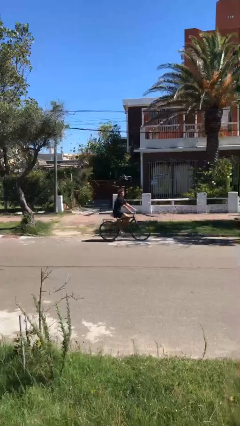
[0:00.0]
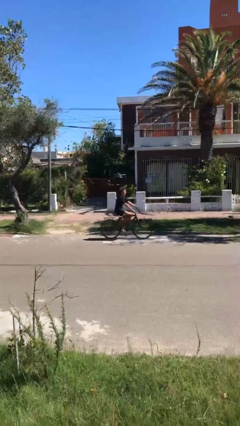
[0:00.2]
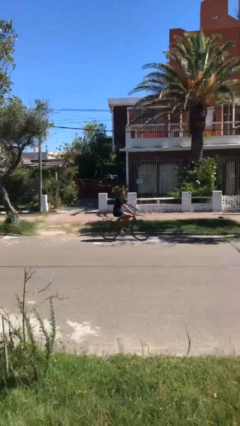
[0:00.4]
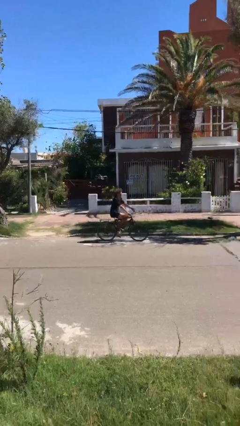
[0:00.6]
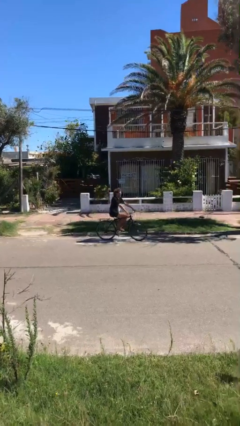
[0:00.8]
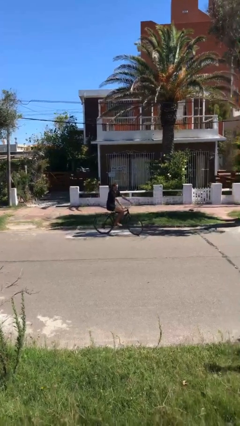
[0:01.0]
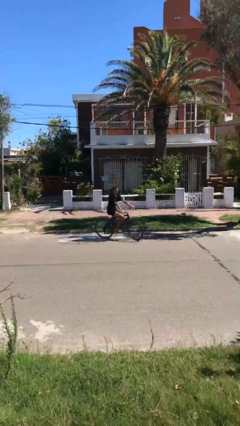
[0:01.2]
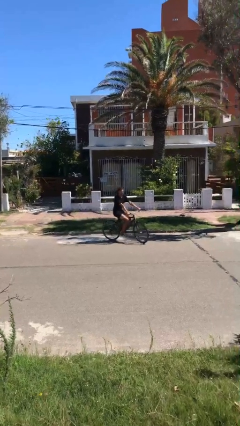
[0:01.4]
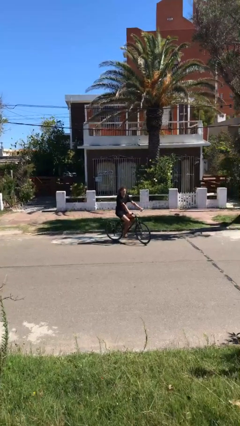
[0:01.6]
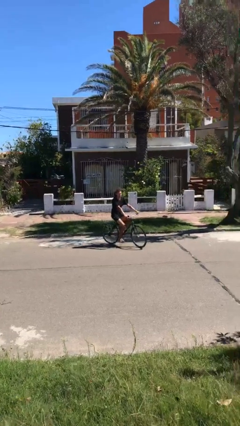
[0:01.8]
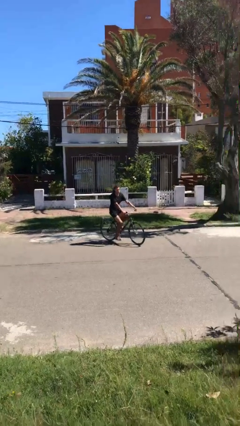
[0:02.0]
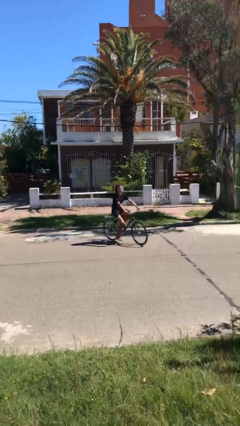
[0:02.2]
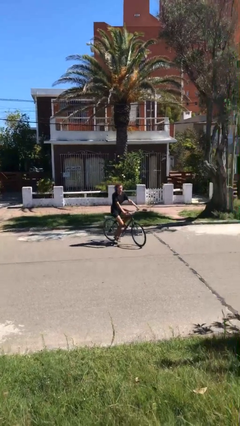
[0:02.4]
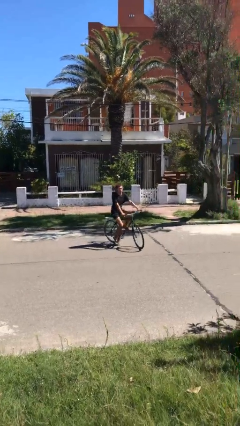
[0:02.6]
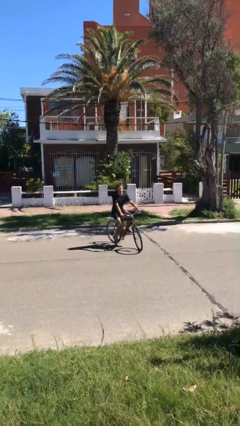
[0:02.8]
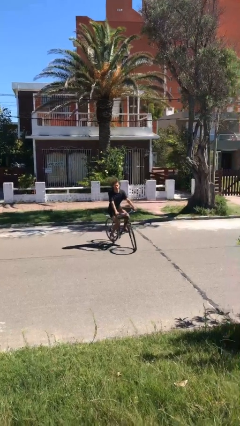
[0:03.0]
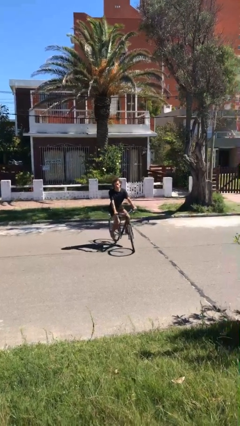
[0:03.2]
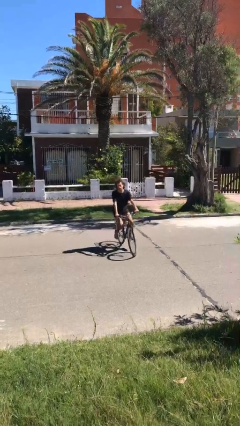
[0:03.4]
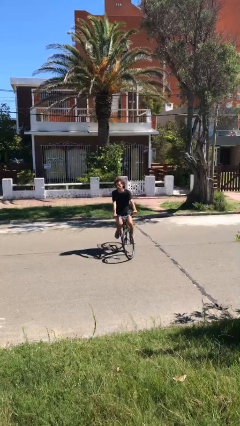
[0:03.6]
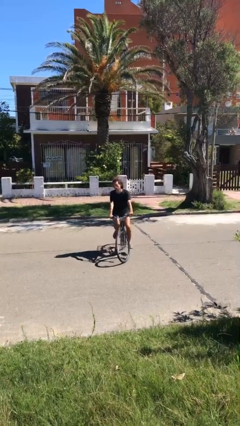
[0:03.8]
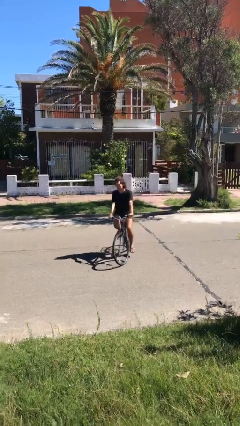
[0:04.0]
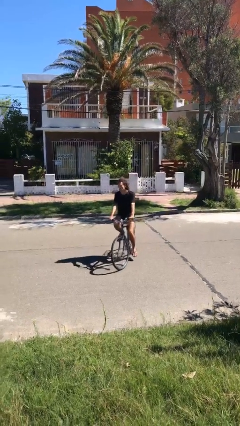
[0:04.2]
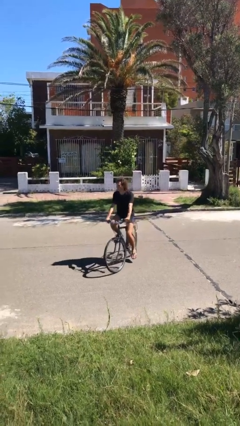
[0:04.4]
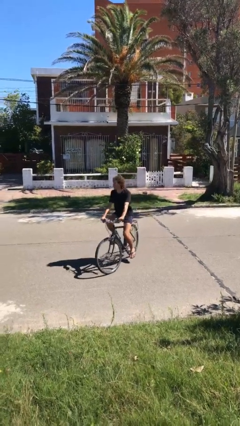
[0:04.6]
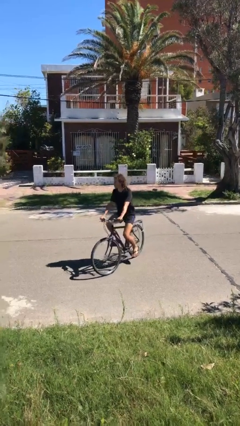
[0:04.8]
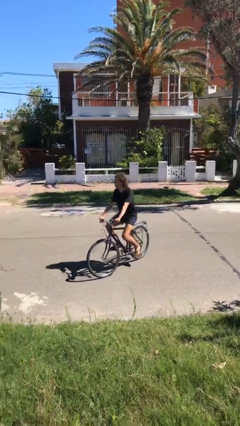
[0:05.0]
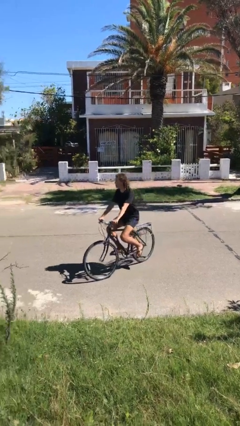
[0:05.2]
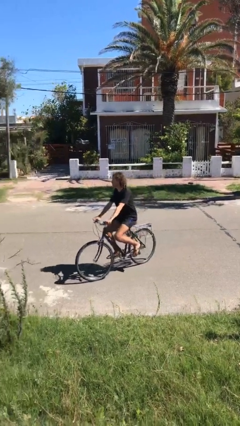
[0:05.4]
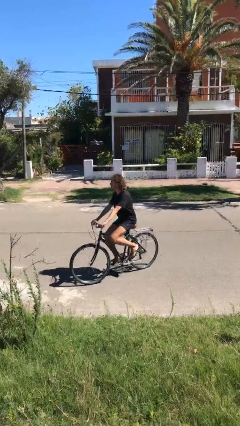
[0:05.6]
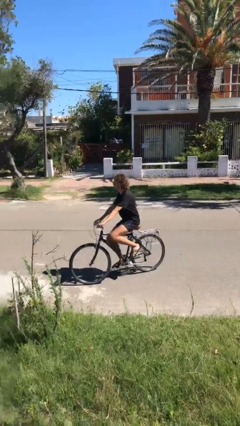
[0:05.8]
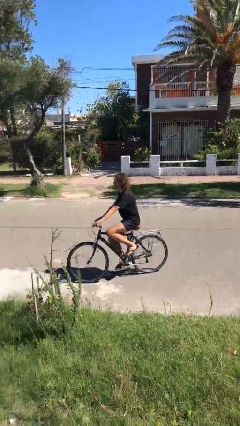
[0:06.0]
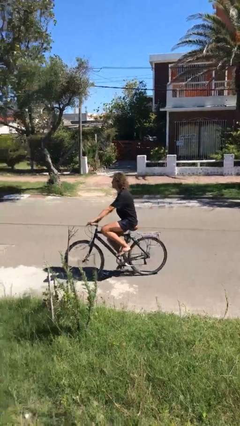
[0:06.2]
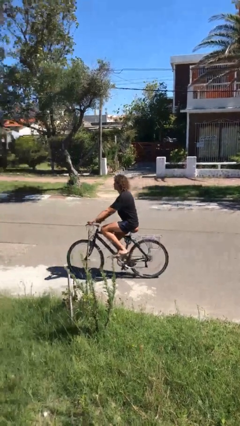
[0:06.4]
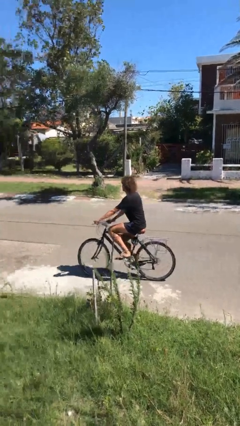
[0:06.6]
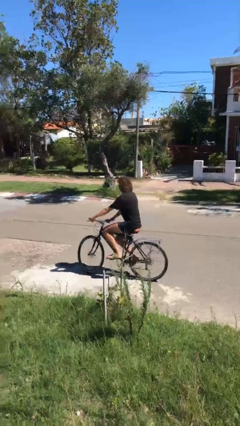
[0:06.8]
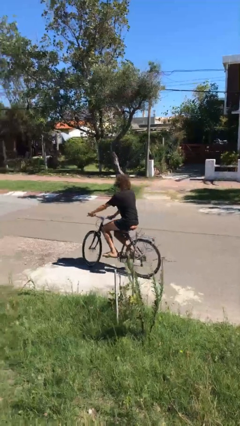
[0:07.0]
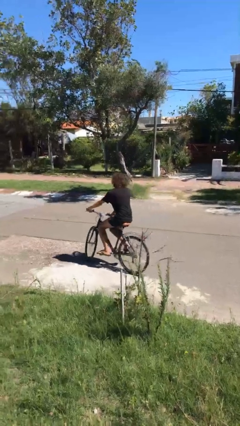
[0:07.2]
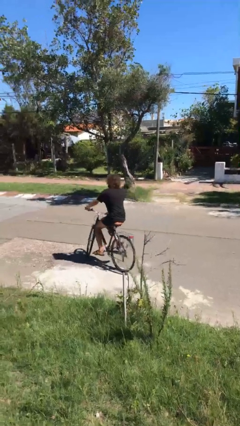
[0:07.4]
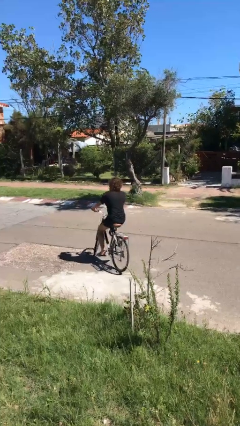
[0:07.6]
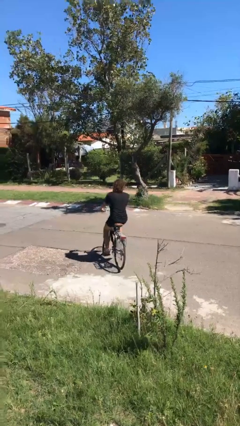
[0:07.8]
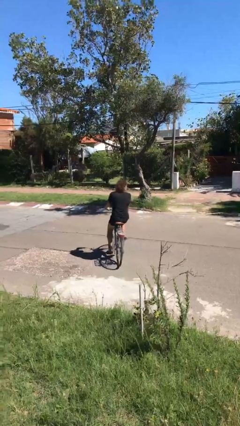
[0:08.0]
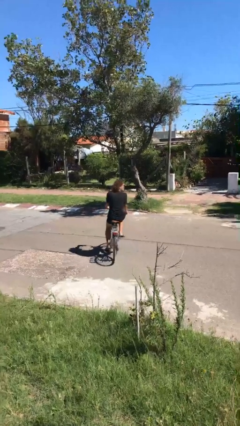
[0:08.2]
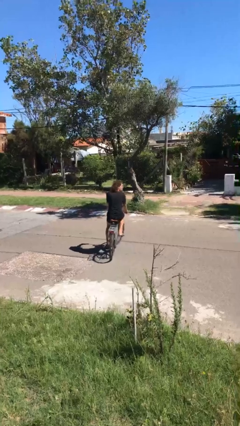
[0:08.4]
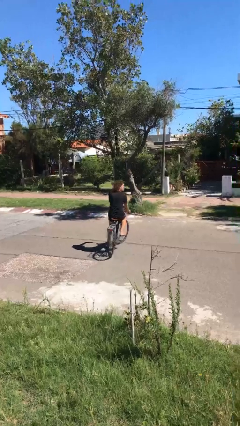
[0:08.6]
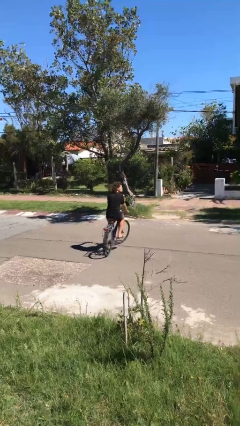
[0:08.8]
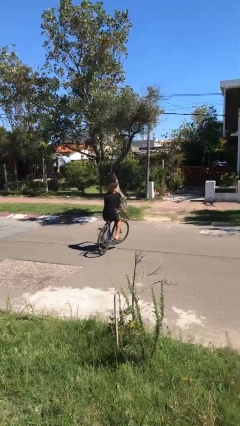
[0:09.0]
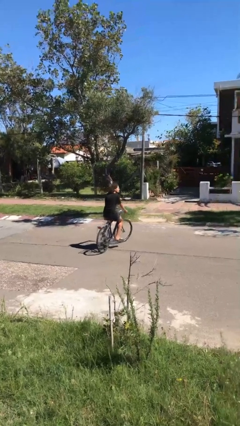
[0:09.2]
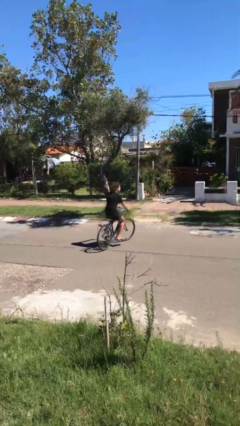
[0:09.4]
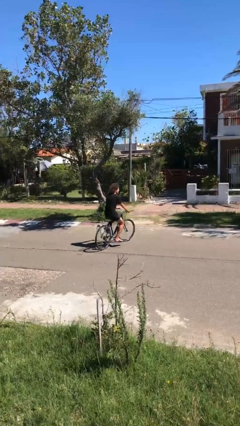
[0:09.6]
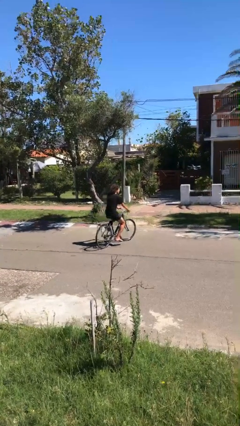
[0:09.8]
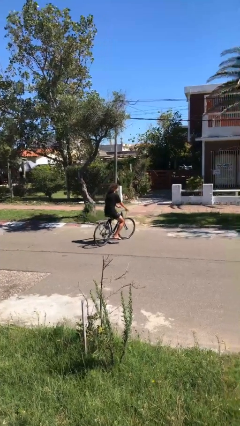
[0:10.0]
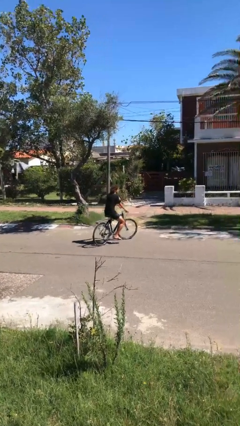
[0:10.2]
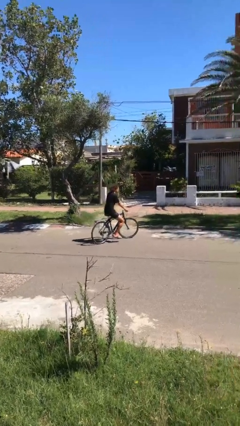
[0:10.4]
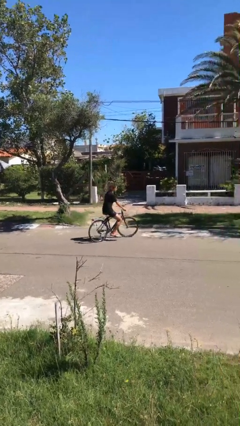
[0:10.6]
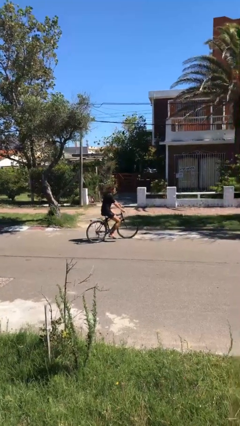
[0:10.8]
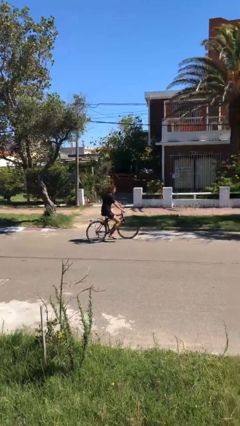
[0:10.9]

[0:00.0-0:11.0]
person rides bicycle

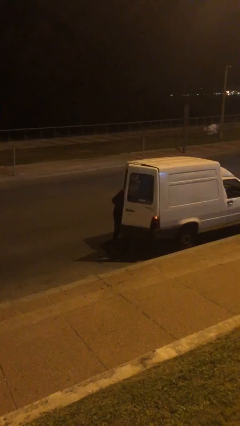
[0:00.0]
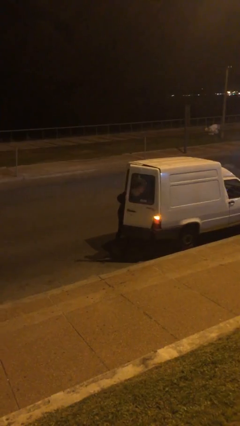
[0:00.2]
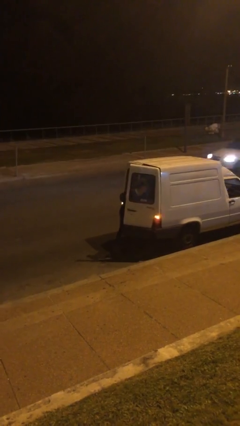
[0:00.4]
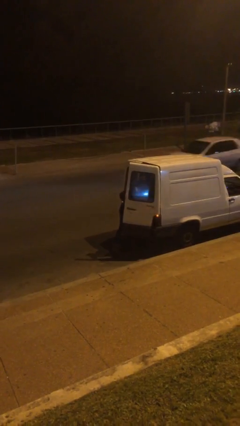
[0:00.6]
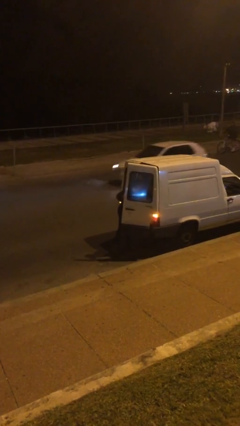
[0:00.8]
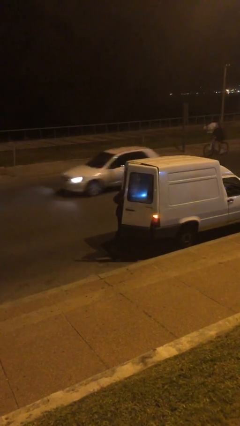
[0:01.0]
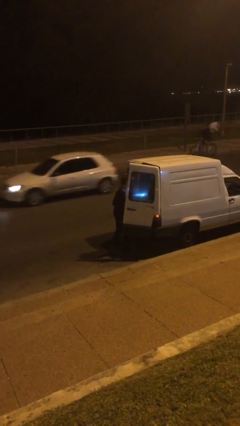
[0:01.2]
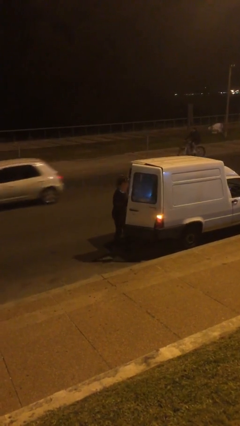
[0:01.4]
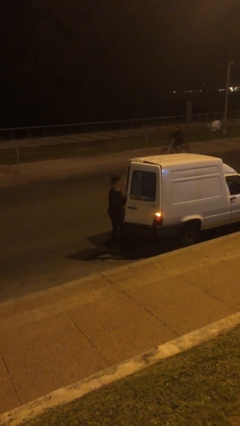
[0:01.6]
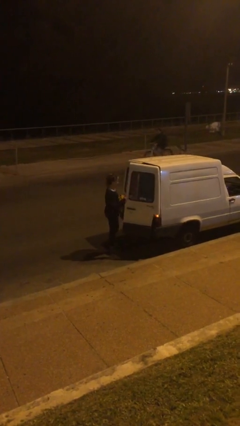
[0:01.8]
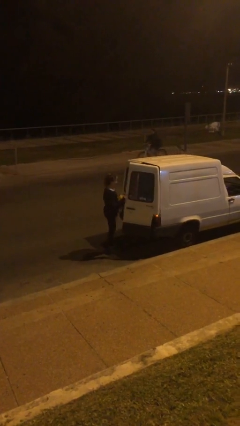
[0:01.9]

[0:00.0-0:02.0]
person unloads car

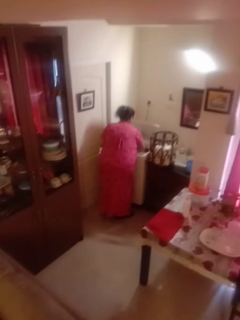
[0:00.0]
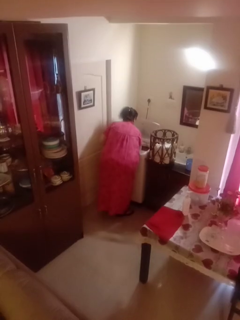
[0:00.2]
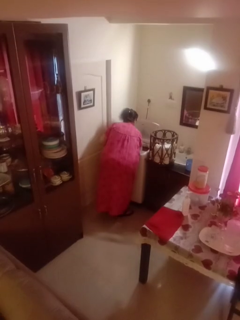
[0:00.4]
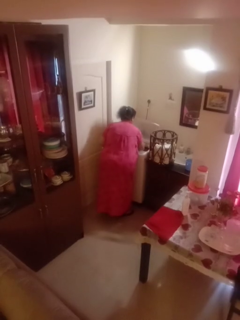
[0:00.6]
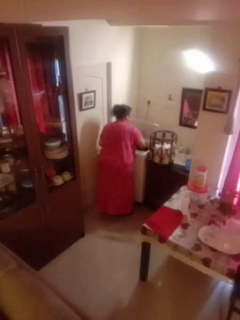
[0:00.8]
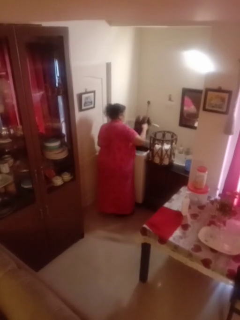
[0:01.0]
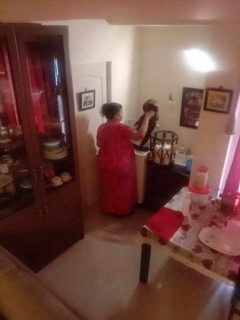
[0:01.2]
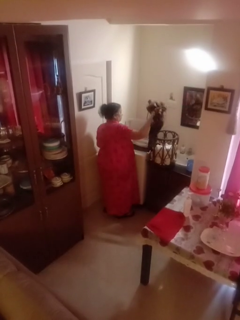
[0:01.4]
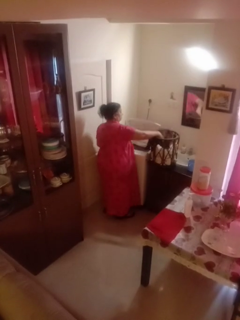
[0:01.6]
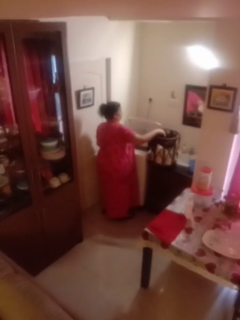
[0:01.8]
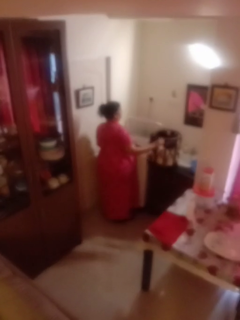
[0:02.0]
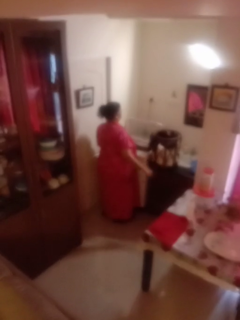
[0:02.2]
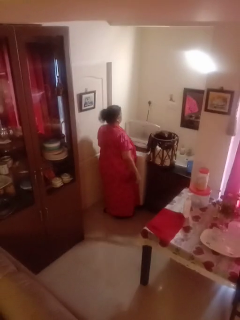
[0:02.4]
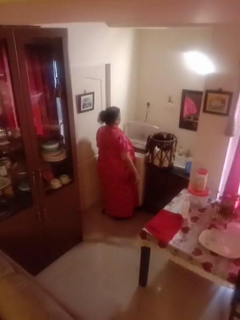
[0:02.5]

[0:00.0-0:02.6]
person unloads dryer

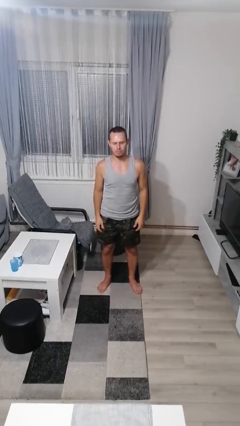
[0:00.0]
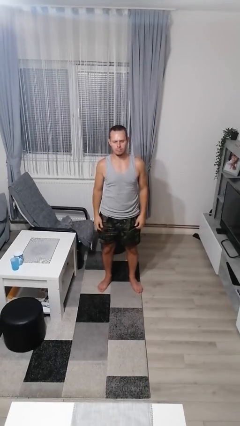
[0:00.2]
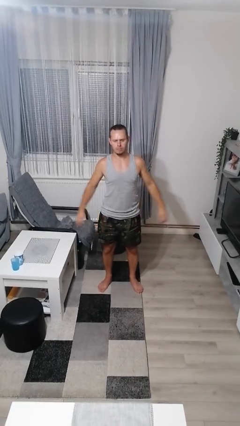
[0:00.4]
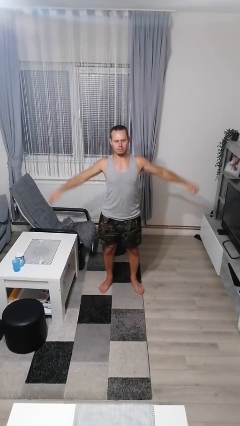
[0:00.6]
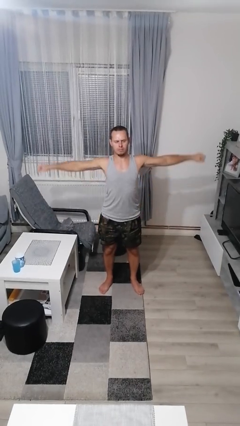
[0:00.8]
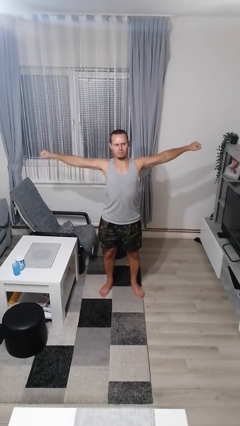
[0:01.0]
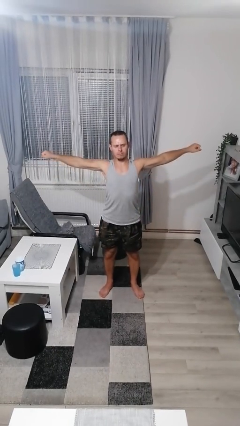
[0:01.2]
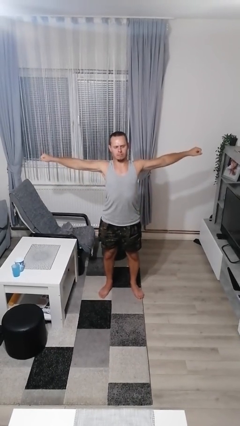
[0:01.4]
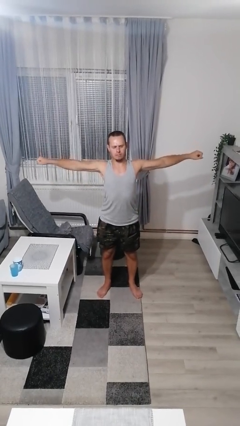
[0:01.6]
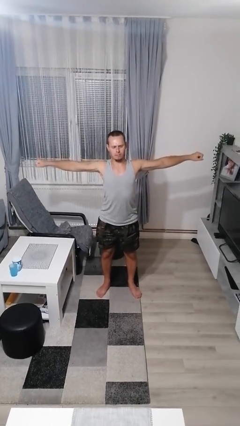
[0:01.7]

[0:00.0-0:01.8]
person stretches arms to side

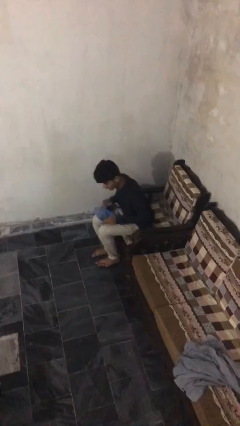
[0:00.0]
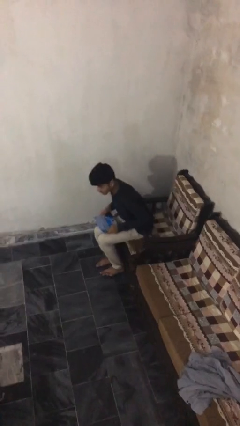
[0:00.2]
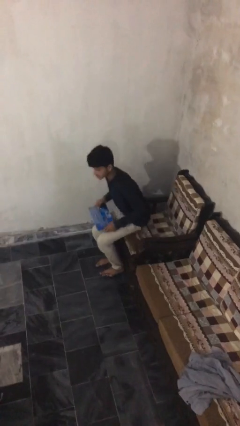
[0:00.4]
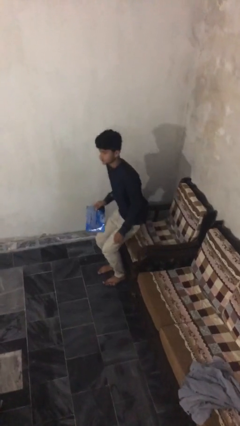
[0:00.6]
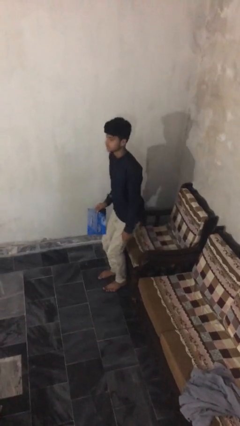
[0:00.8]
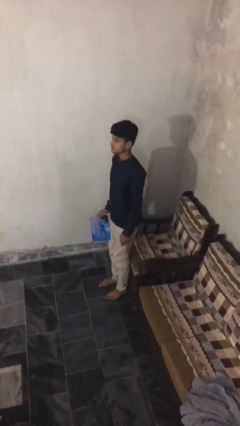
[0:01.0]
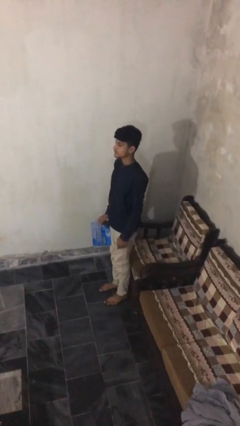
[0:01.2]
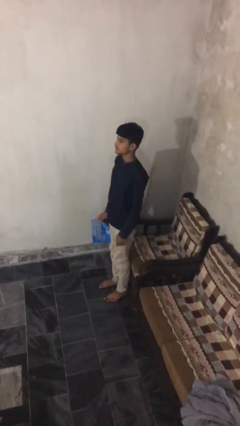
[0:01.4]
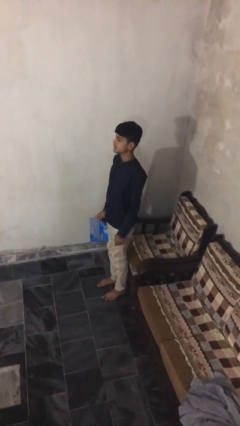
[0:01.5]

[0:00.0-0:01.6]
person stands up
